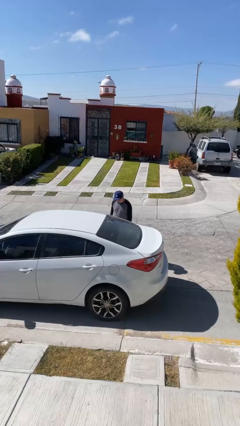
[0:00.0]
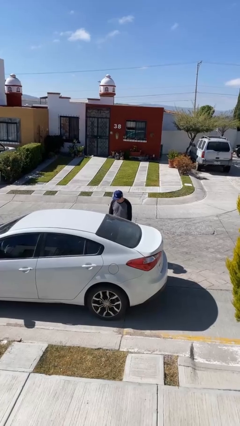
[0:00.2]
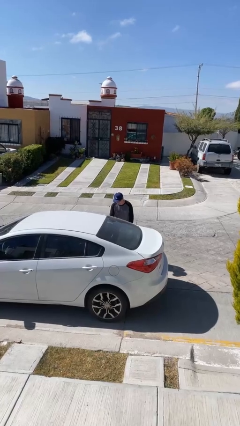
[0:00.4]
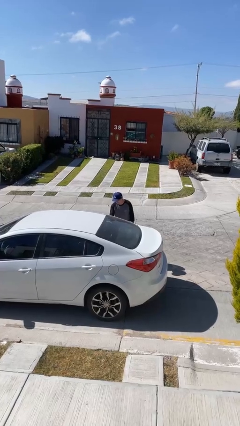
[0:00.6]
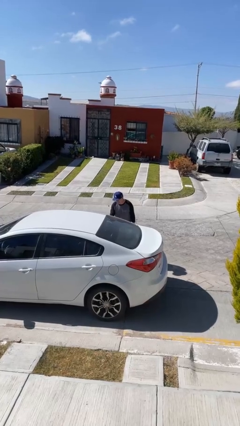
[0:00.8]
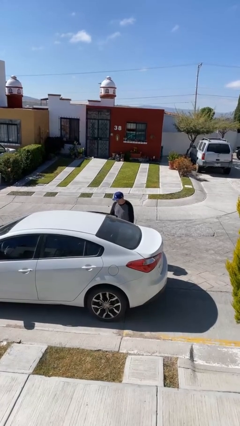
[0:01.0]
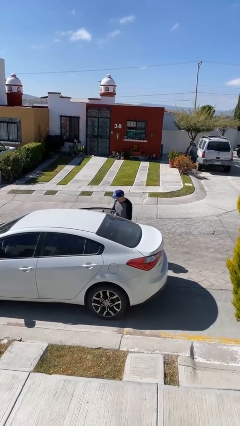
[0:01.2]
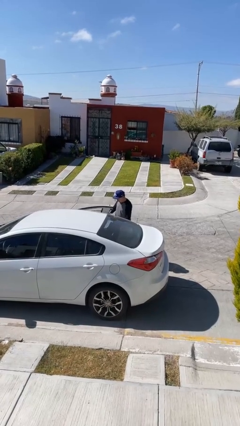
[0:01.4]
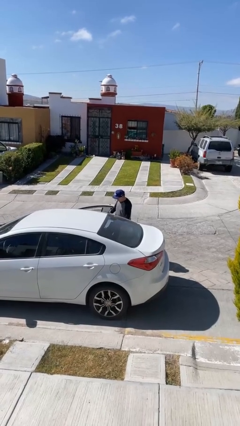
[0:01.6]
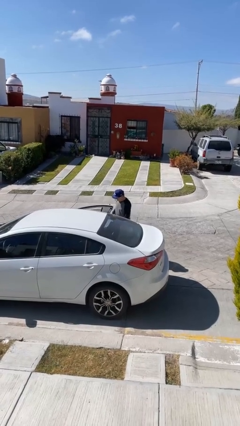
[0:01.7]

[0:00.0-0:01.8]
person opens car door

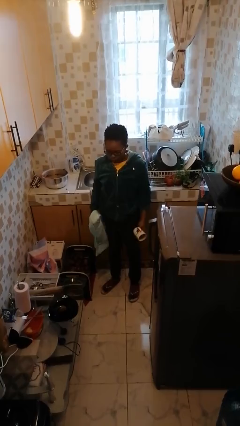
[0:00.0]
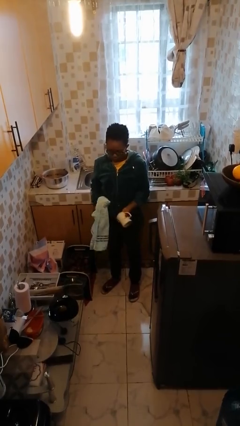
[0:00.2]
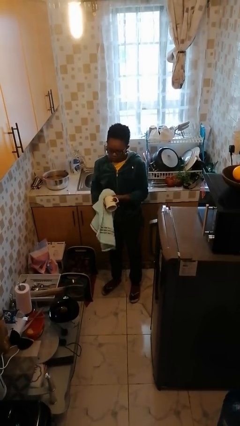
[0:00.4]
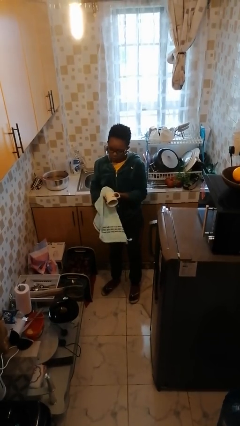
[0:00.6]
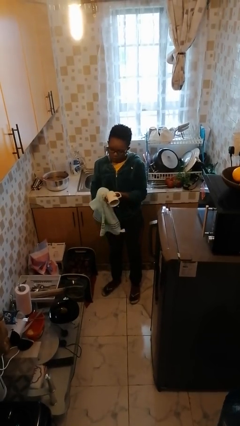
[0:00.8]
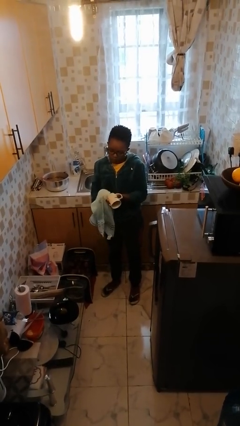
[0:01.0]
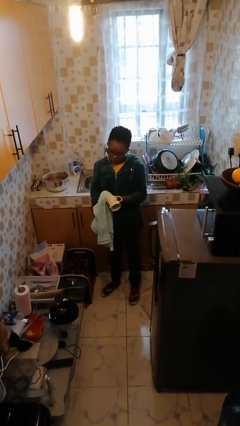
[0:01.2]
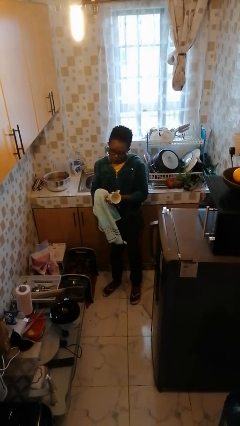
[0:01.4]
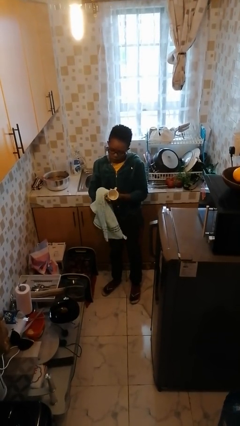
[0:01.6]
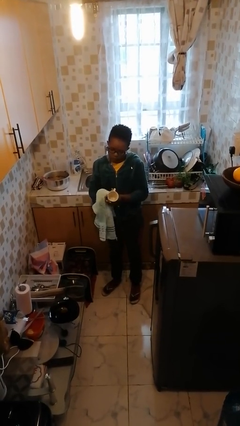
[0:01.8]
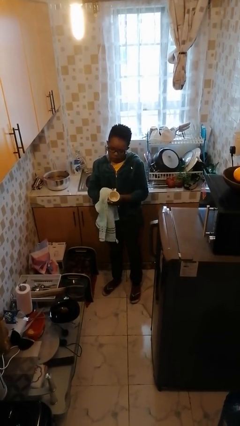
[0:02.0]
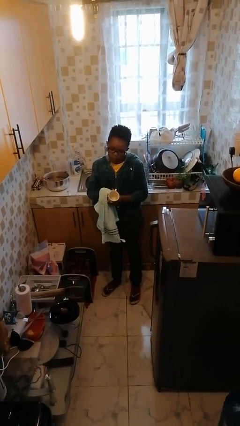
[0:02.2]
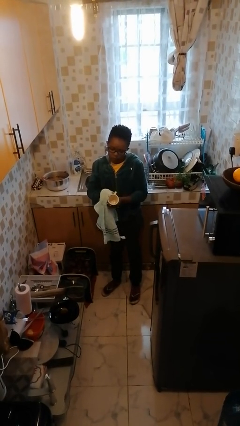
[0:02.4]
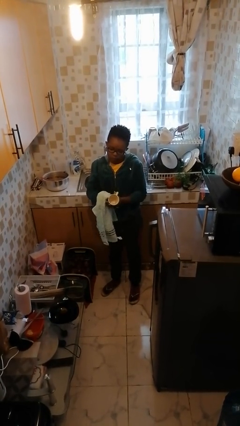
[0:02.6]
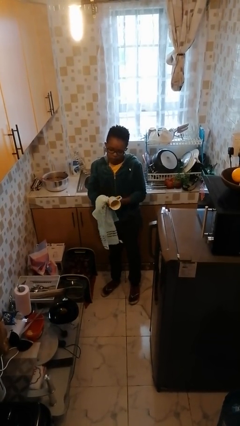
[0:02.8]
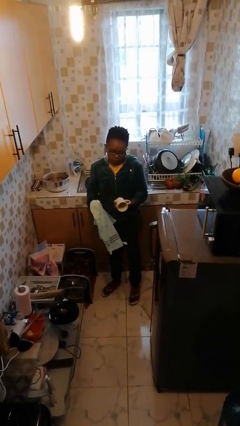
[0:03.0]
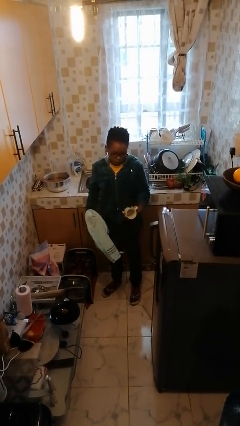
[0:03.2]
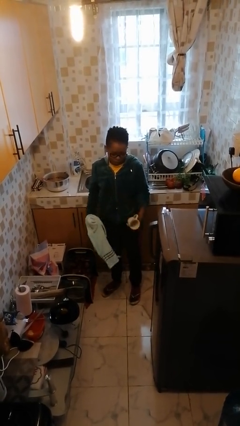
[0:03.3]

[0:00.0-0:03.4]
person dries dish

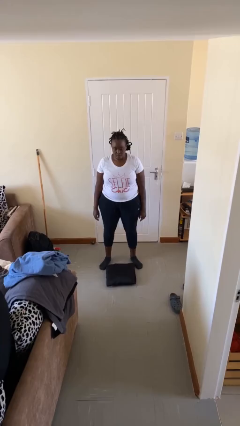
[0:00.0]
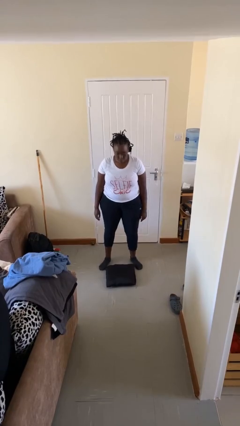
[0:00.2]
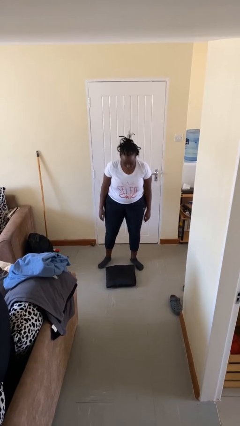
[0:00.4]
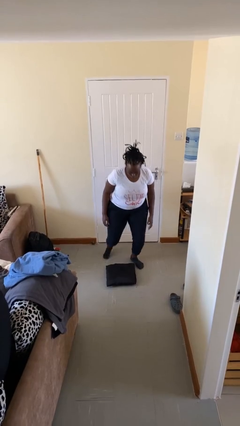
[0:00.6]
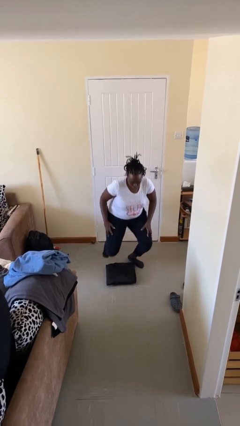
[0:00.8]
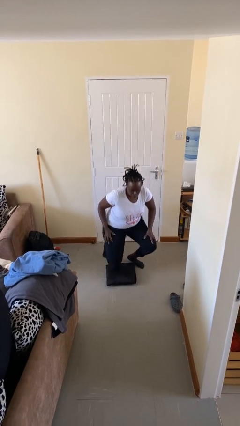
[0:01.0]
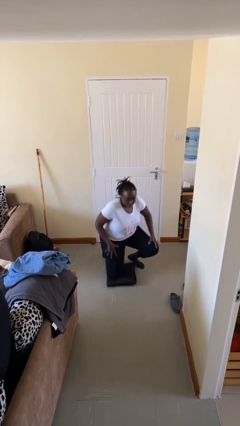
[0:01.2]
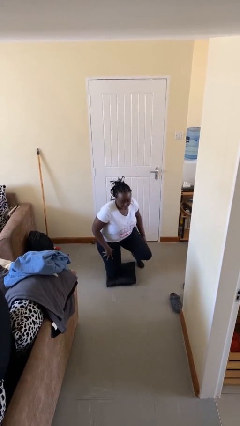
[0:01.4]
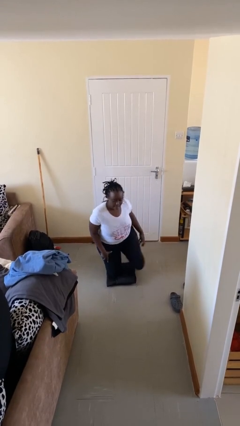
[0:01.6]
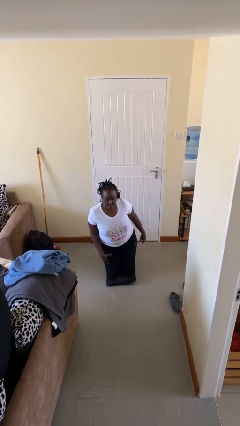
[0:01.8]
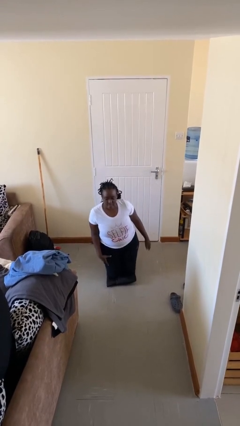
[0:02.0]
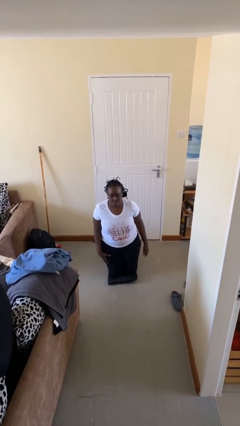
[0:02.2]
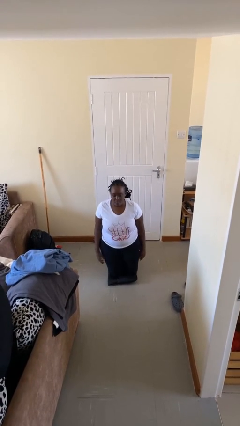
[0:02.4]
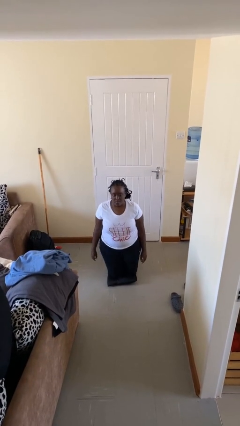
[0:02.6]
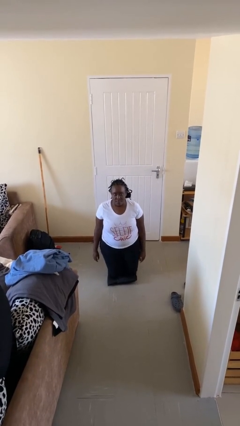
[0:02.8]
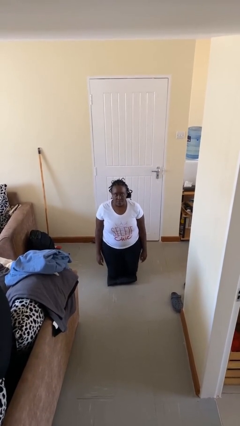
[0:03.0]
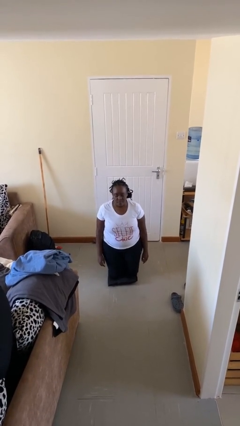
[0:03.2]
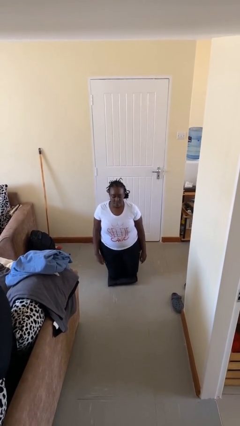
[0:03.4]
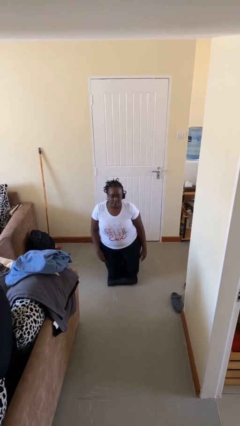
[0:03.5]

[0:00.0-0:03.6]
person kneels

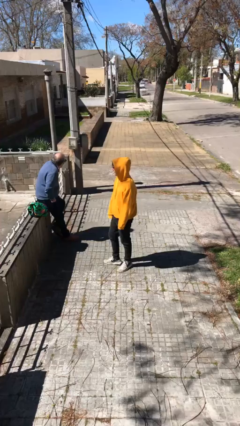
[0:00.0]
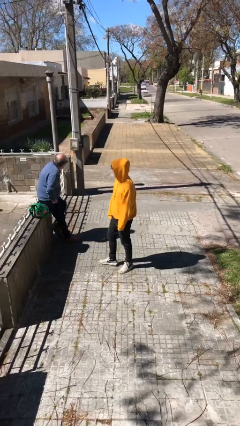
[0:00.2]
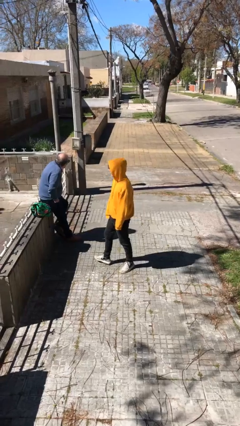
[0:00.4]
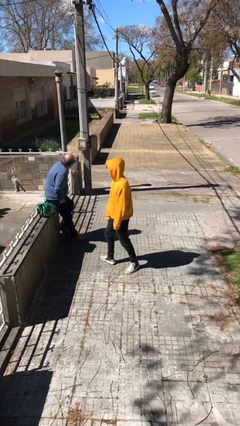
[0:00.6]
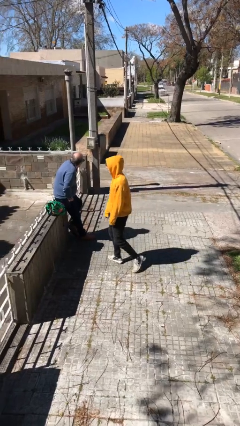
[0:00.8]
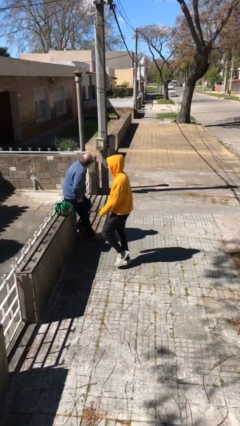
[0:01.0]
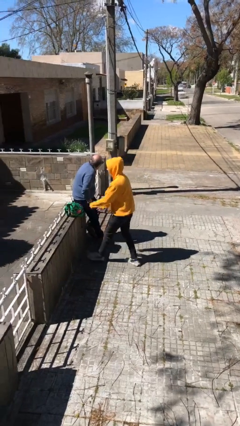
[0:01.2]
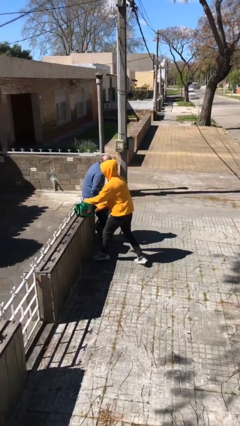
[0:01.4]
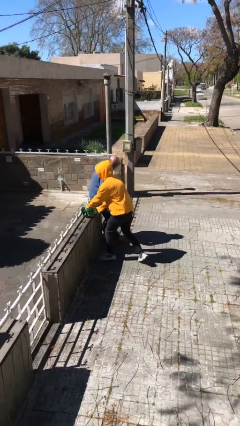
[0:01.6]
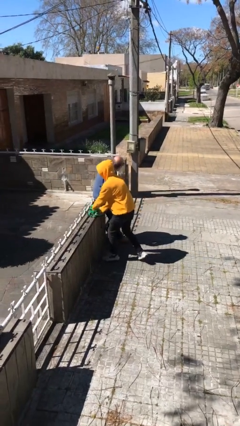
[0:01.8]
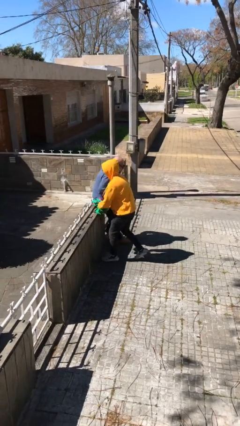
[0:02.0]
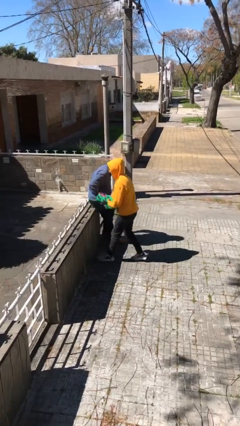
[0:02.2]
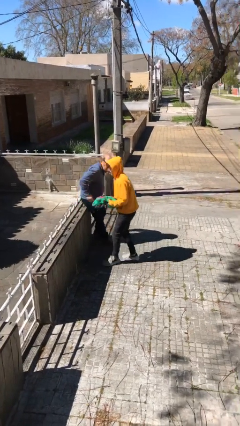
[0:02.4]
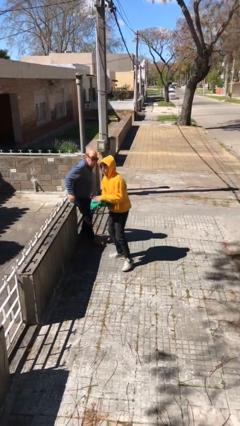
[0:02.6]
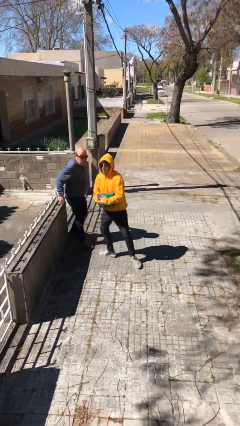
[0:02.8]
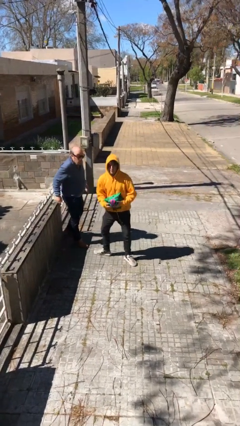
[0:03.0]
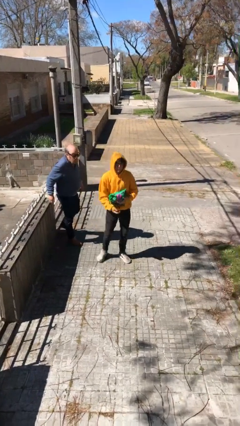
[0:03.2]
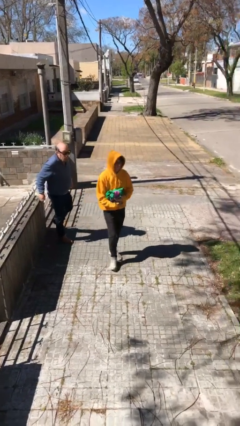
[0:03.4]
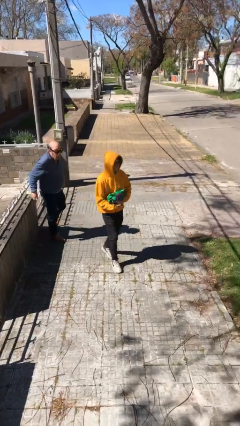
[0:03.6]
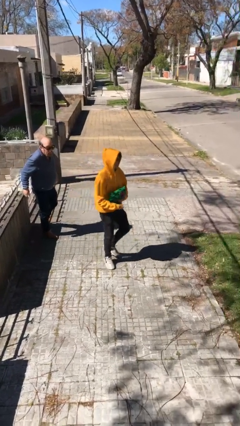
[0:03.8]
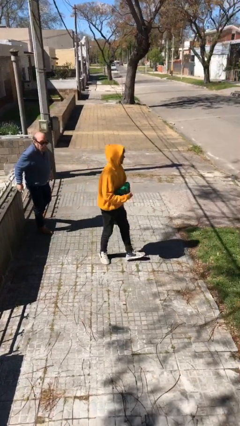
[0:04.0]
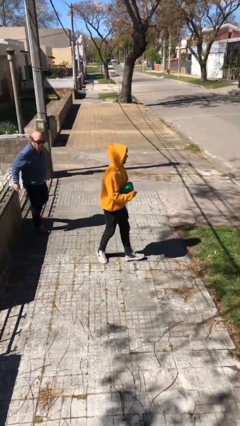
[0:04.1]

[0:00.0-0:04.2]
person steals object from person

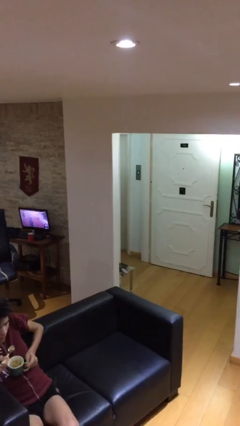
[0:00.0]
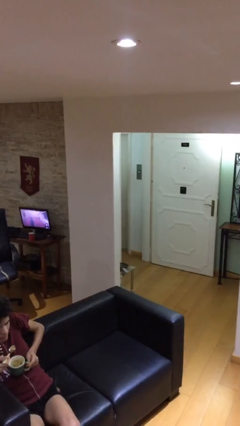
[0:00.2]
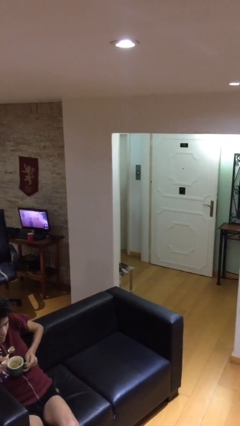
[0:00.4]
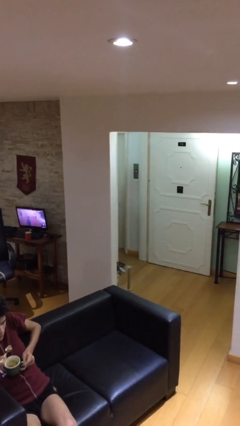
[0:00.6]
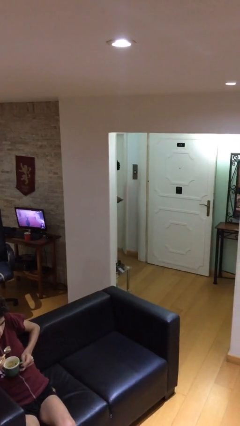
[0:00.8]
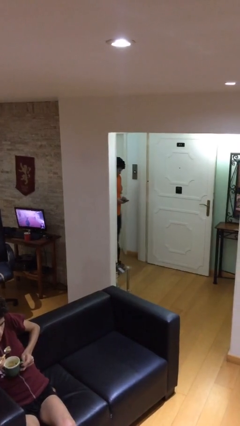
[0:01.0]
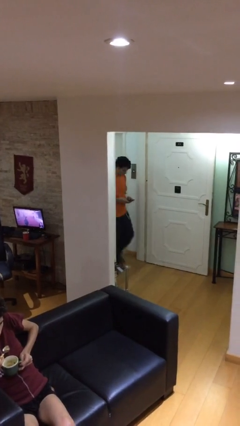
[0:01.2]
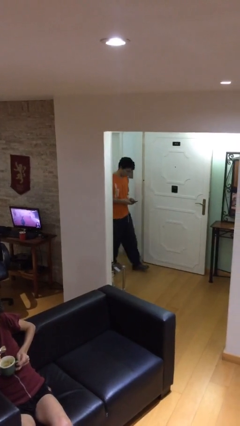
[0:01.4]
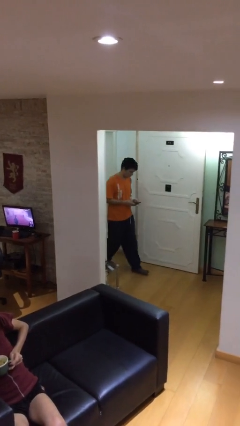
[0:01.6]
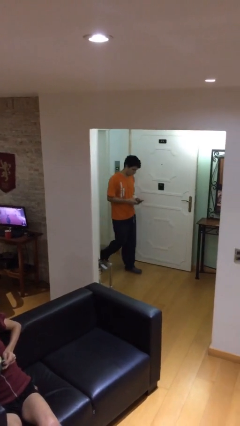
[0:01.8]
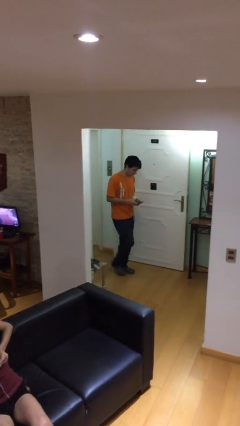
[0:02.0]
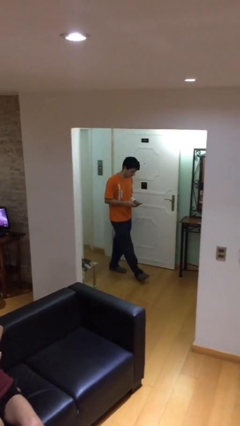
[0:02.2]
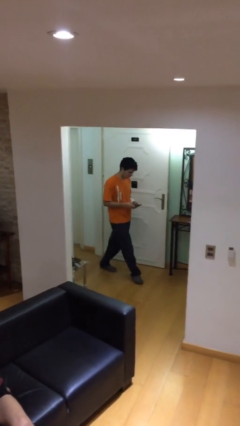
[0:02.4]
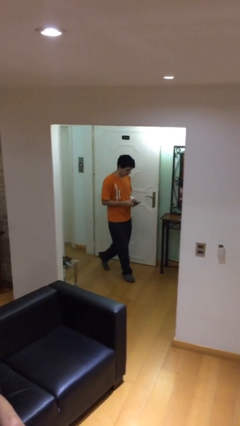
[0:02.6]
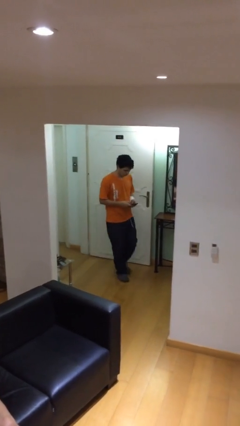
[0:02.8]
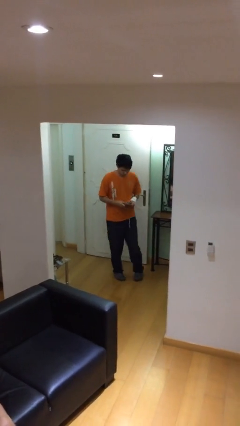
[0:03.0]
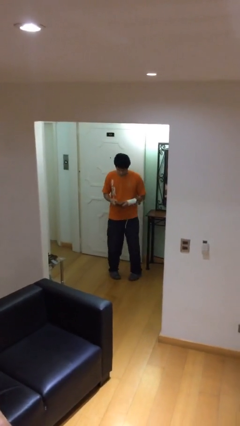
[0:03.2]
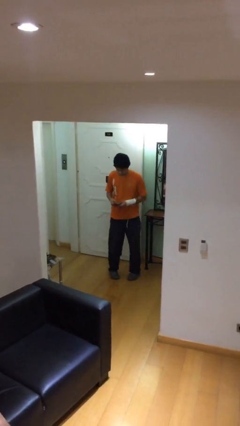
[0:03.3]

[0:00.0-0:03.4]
person enters scene through structure

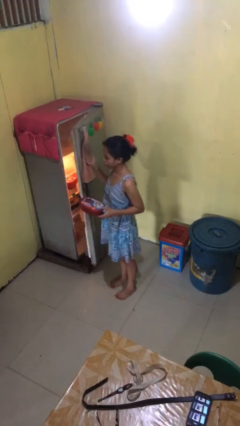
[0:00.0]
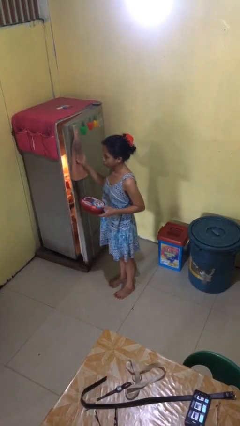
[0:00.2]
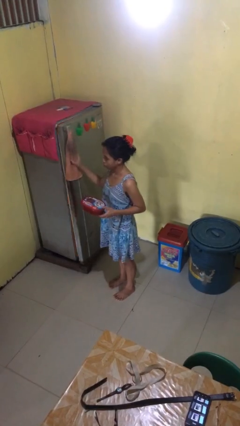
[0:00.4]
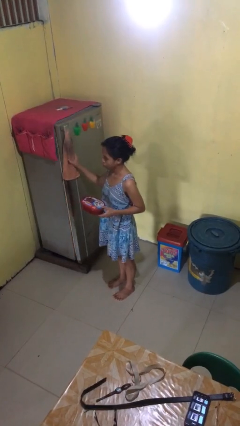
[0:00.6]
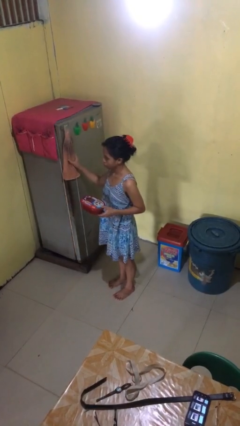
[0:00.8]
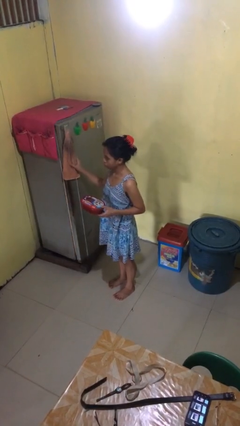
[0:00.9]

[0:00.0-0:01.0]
person closes refrigerator

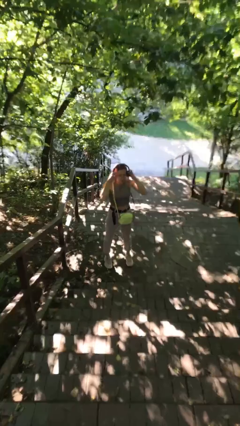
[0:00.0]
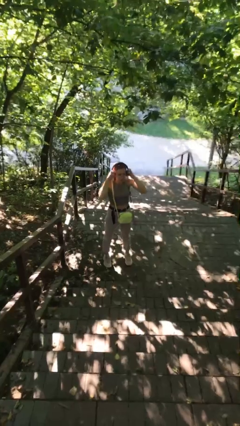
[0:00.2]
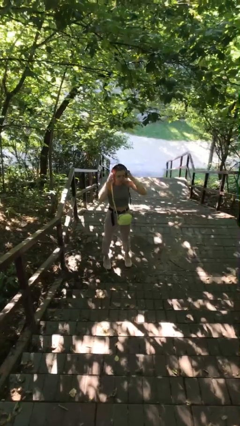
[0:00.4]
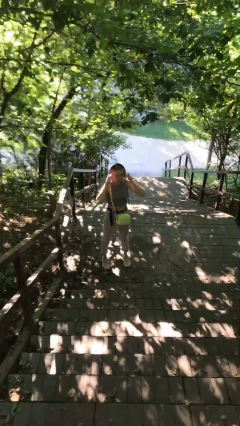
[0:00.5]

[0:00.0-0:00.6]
person puts on headphones
